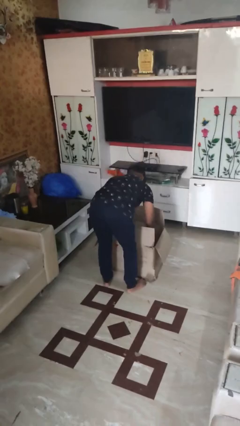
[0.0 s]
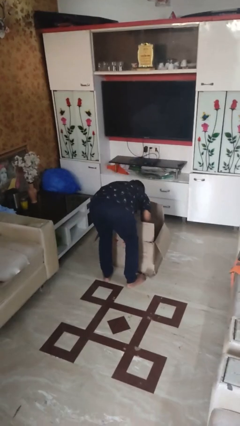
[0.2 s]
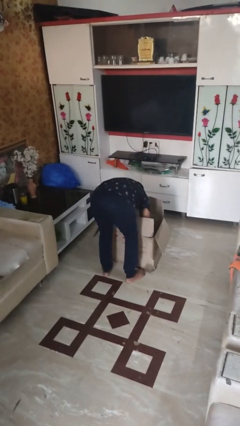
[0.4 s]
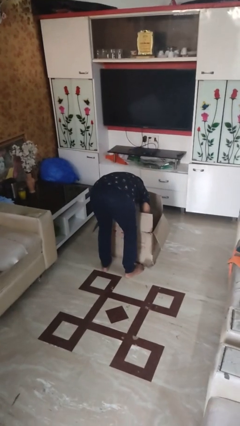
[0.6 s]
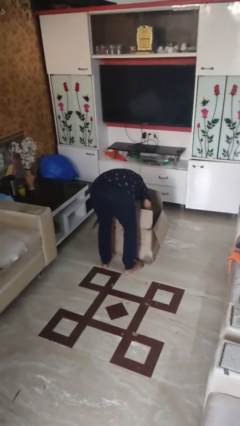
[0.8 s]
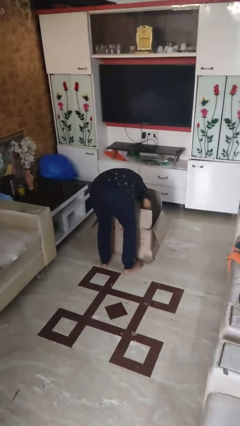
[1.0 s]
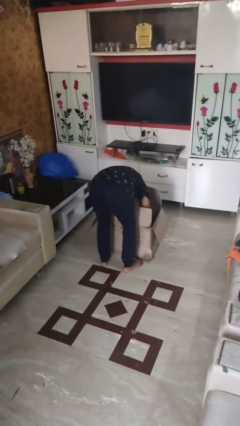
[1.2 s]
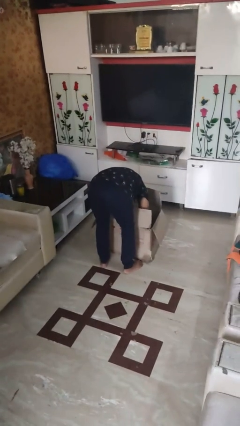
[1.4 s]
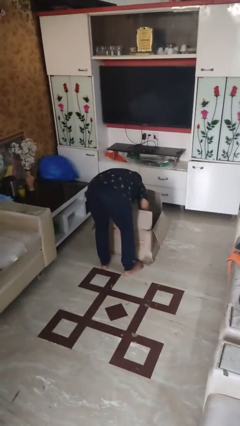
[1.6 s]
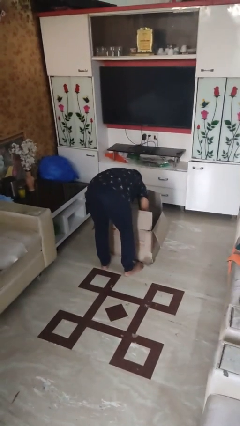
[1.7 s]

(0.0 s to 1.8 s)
person searches in box

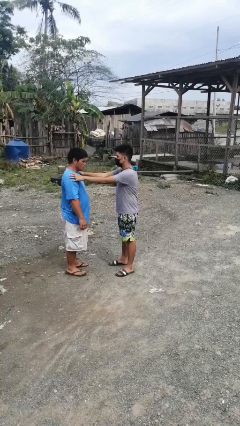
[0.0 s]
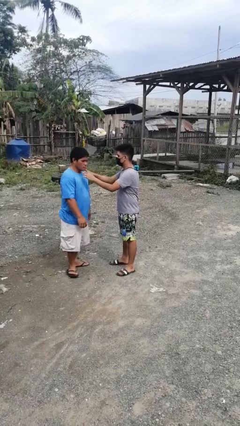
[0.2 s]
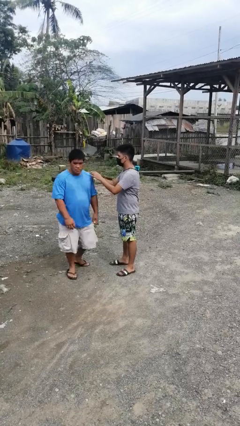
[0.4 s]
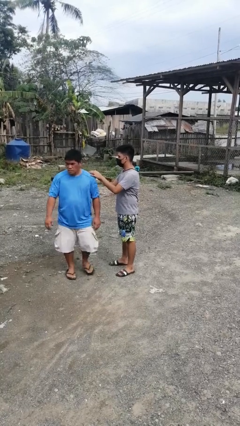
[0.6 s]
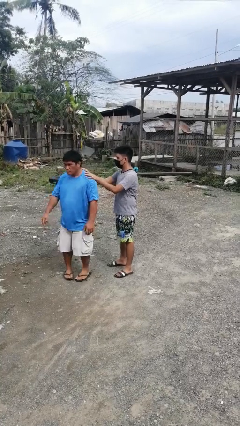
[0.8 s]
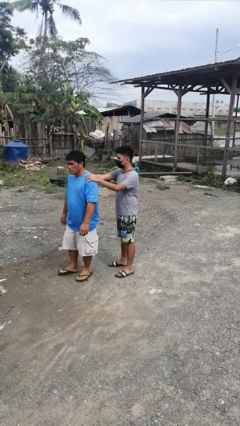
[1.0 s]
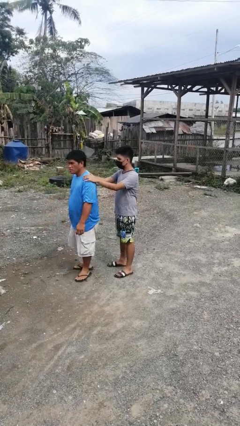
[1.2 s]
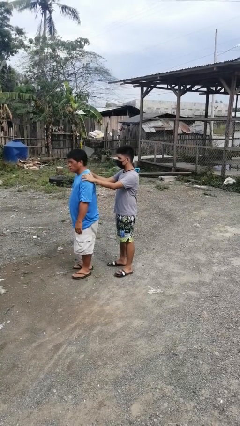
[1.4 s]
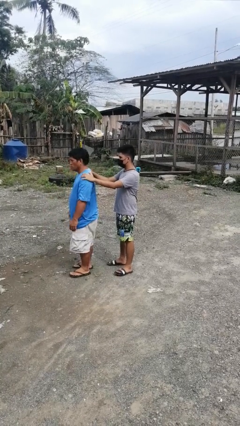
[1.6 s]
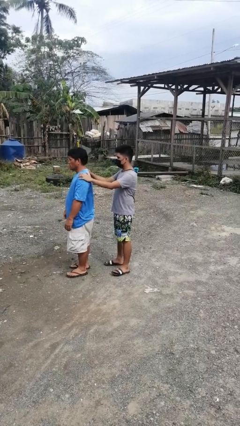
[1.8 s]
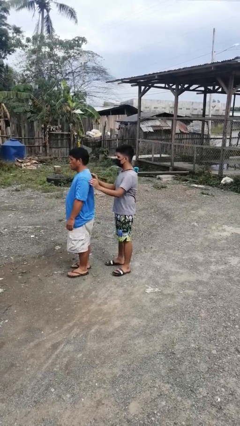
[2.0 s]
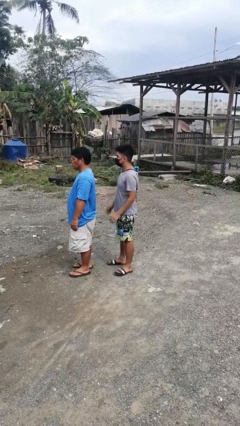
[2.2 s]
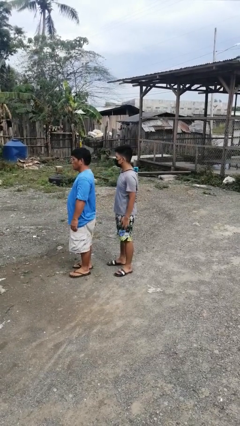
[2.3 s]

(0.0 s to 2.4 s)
person spins person around

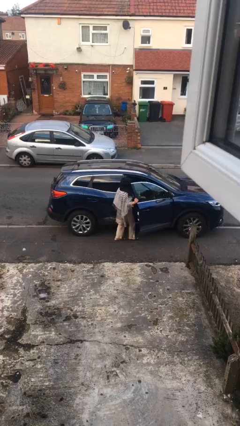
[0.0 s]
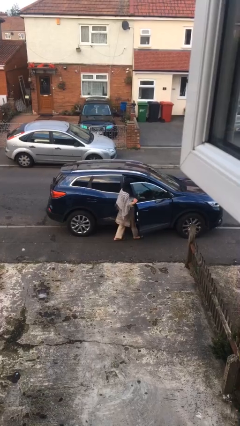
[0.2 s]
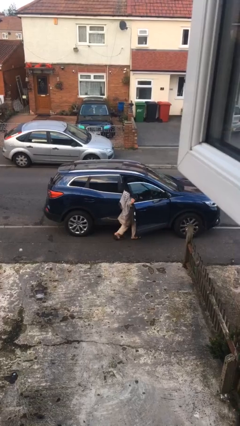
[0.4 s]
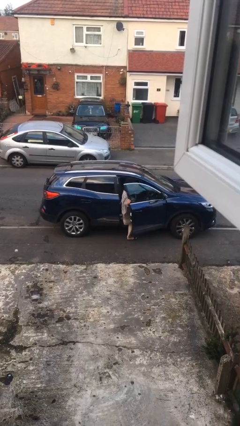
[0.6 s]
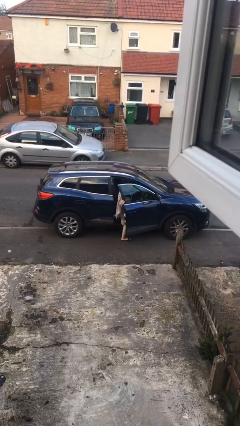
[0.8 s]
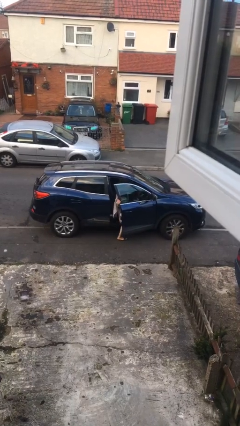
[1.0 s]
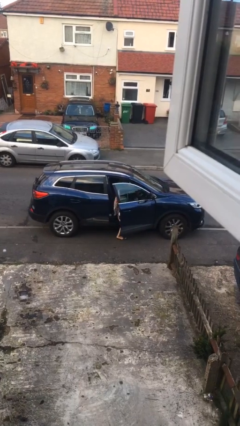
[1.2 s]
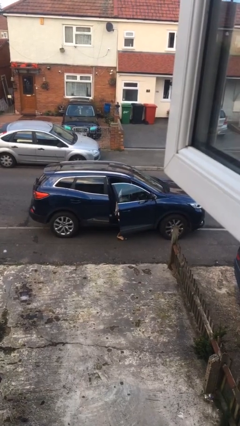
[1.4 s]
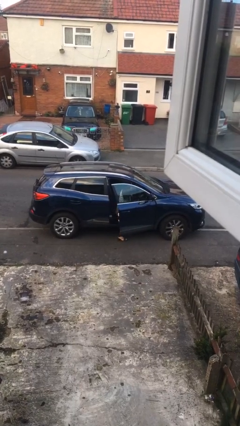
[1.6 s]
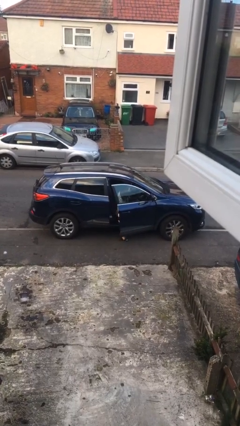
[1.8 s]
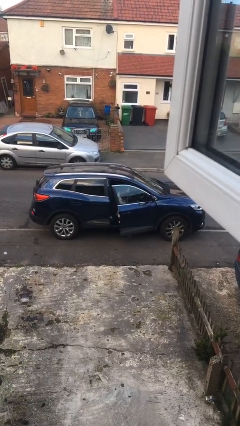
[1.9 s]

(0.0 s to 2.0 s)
person enters car

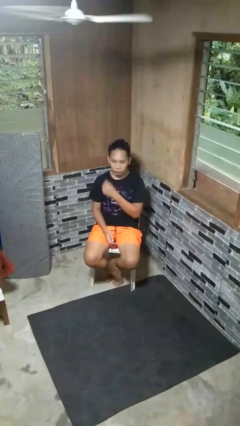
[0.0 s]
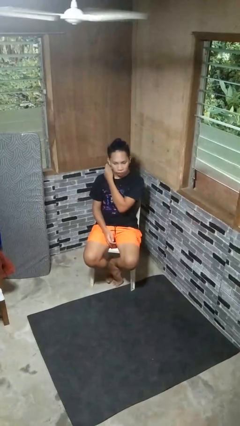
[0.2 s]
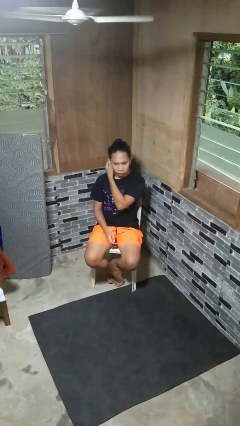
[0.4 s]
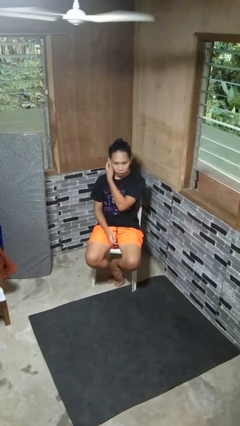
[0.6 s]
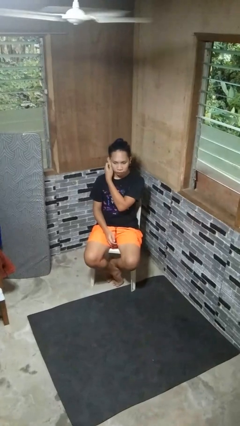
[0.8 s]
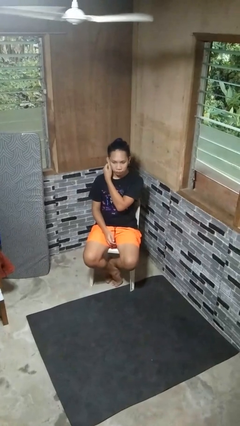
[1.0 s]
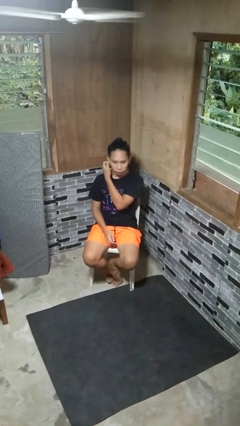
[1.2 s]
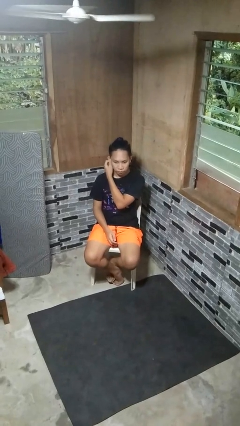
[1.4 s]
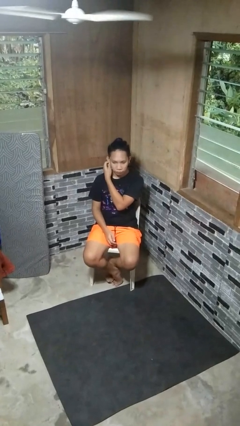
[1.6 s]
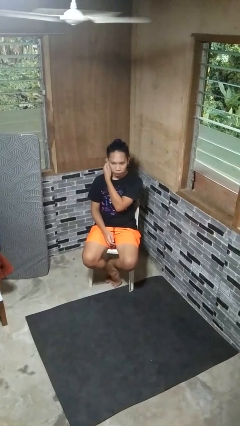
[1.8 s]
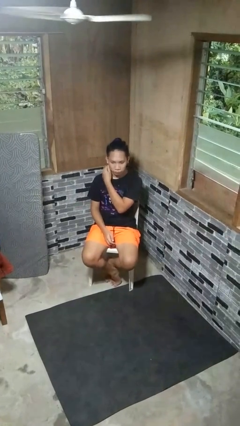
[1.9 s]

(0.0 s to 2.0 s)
person touches earlobe

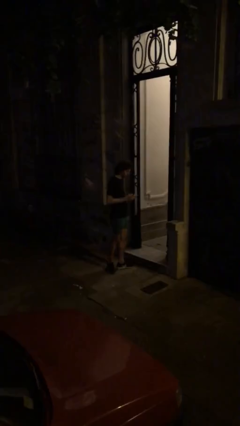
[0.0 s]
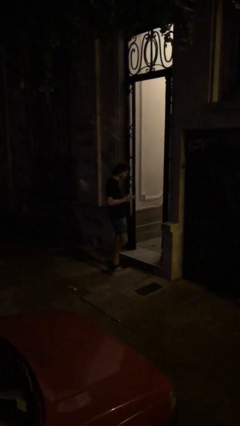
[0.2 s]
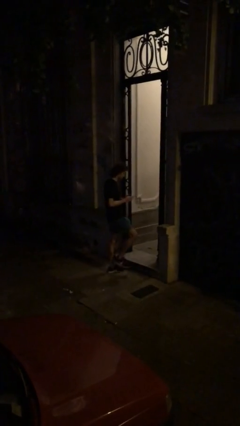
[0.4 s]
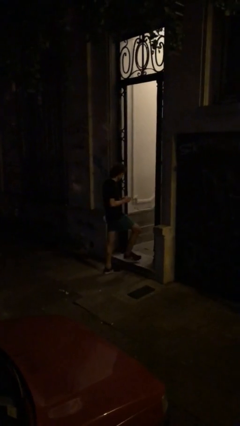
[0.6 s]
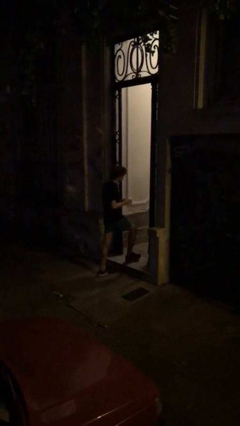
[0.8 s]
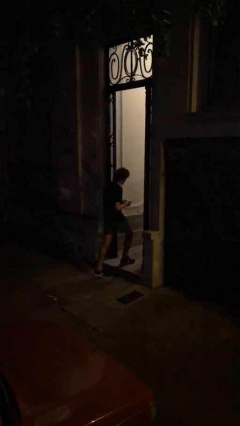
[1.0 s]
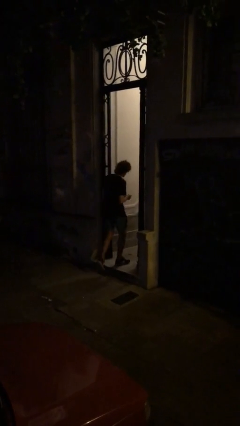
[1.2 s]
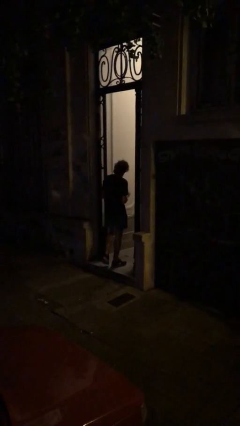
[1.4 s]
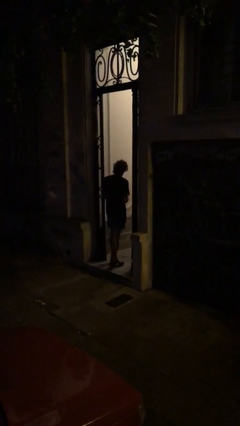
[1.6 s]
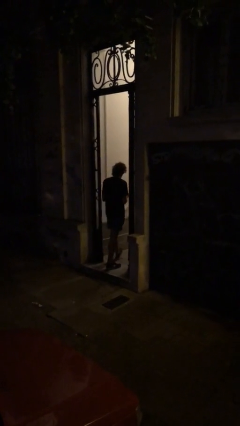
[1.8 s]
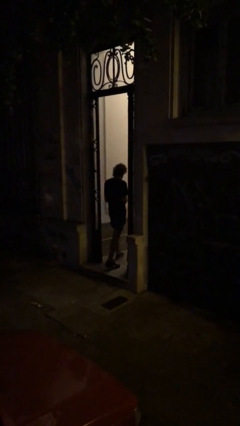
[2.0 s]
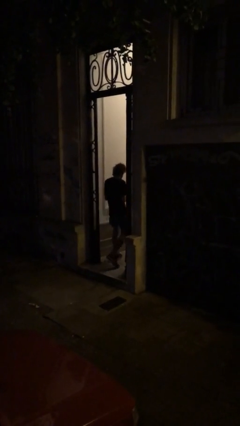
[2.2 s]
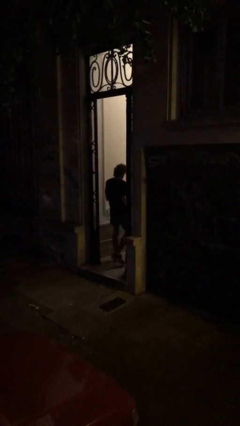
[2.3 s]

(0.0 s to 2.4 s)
person exits scene through structure

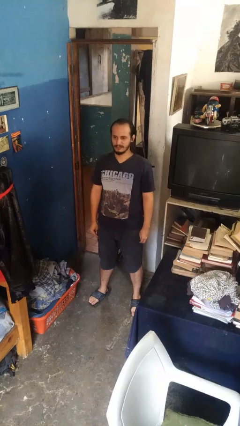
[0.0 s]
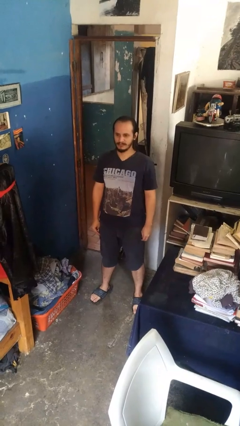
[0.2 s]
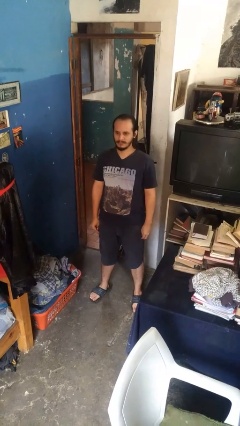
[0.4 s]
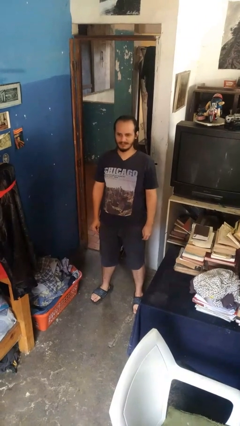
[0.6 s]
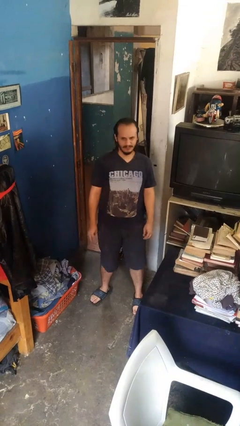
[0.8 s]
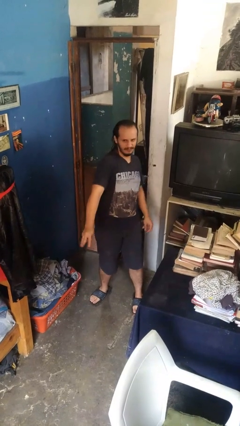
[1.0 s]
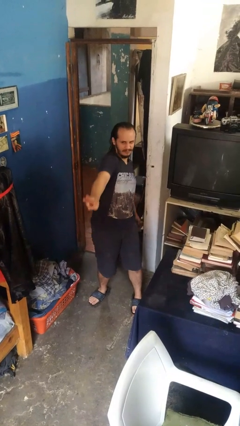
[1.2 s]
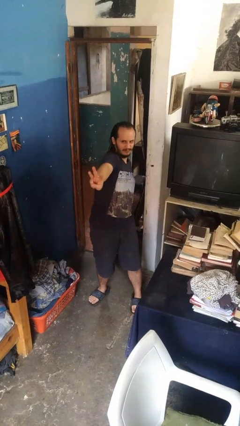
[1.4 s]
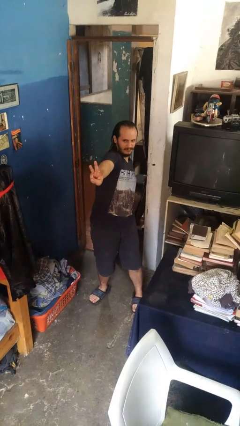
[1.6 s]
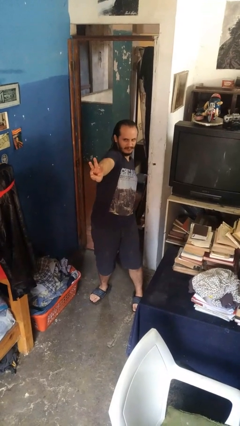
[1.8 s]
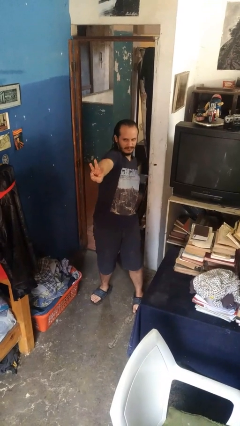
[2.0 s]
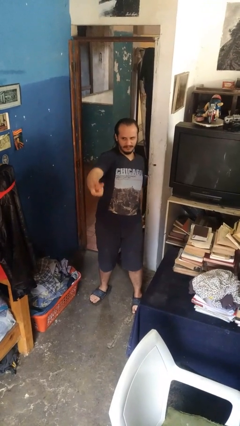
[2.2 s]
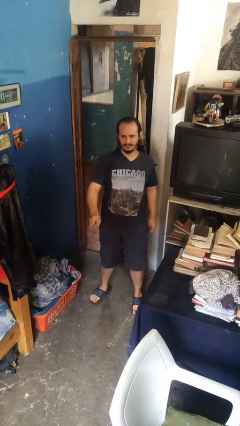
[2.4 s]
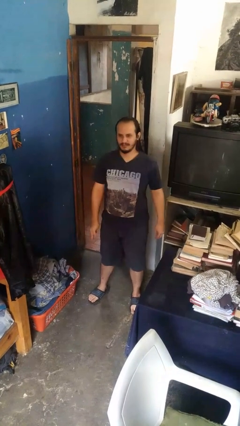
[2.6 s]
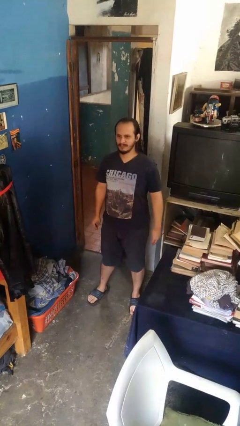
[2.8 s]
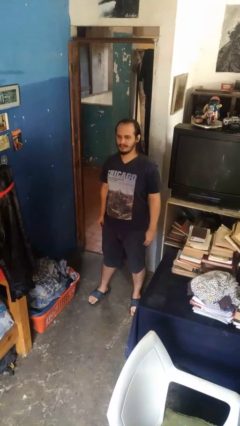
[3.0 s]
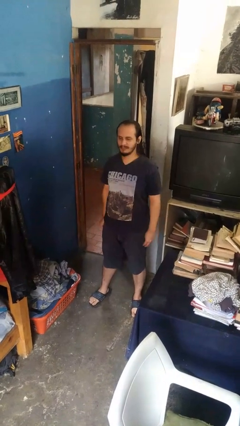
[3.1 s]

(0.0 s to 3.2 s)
person gestures number three

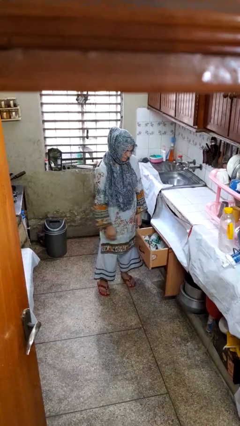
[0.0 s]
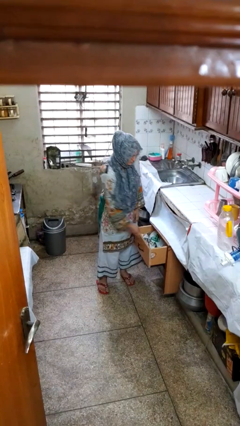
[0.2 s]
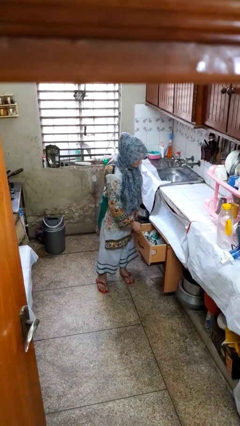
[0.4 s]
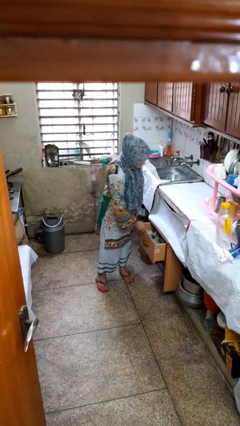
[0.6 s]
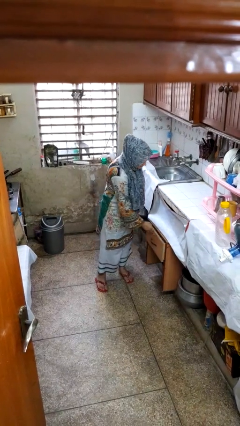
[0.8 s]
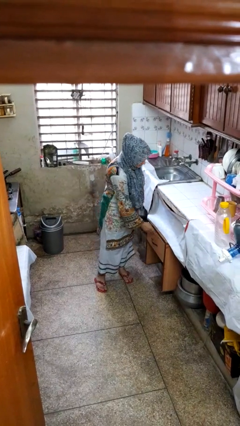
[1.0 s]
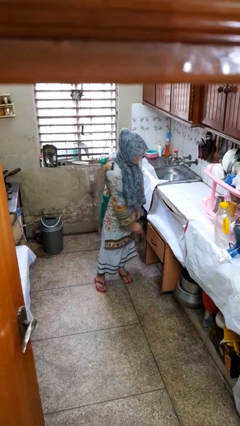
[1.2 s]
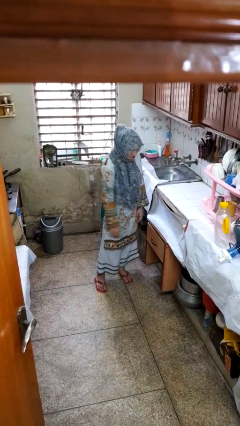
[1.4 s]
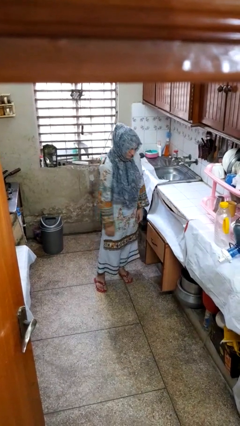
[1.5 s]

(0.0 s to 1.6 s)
person closes kitchen drawer

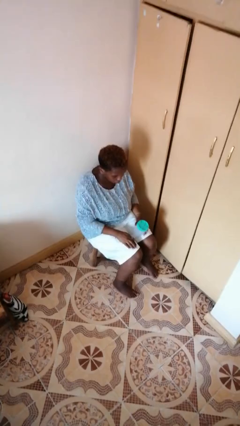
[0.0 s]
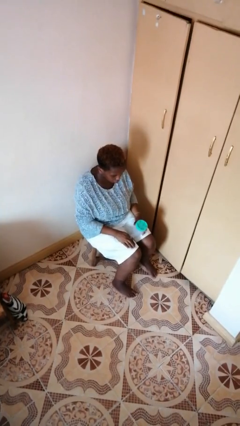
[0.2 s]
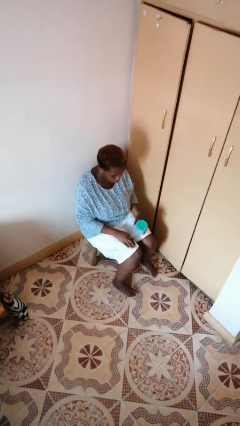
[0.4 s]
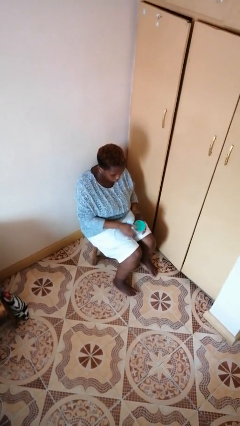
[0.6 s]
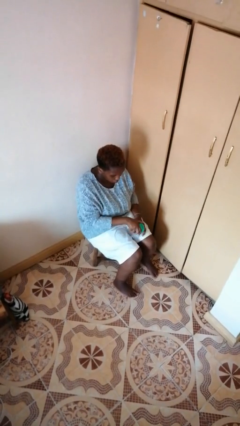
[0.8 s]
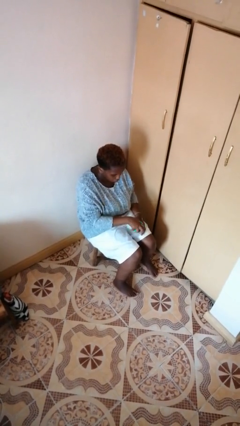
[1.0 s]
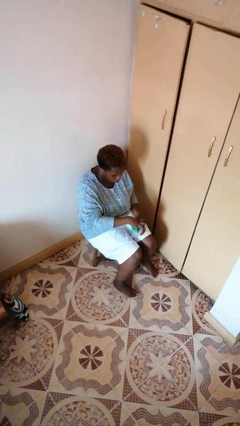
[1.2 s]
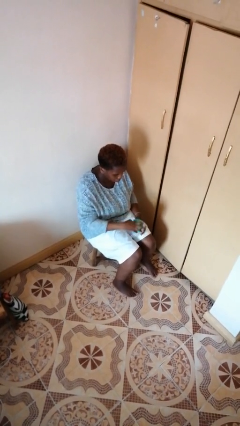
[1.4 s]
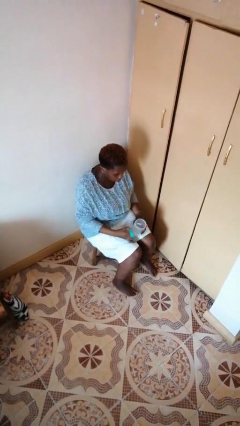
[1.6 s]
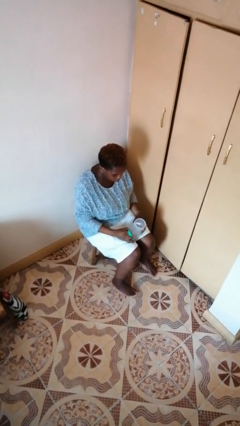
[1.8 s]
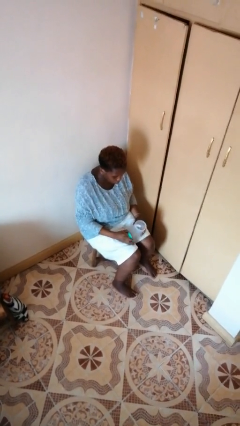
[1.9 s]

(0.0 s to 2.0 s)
person opens jar
